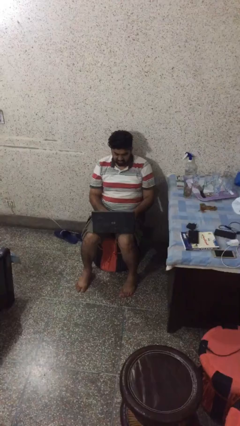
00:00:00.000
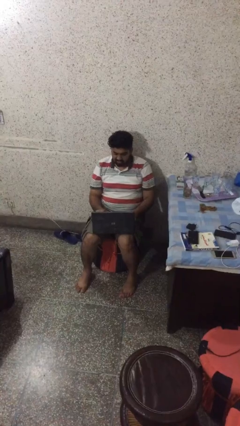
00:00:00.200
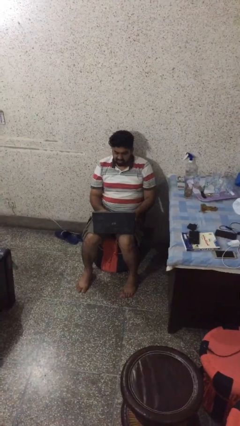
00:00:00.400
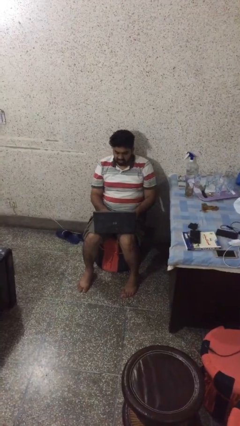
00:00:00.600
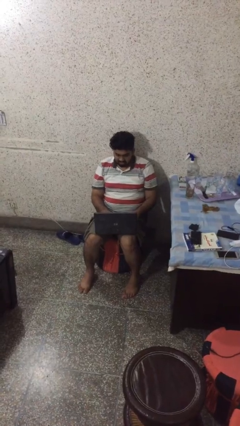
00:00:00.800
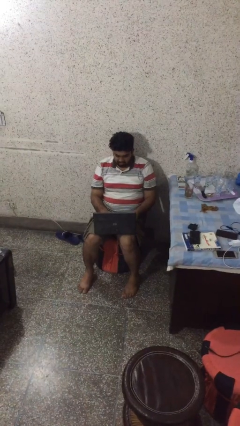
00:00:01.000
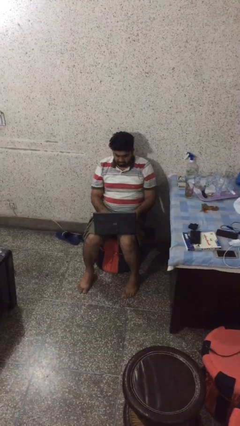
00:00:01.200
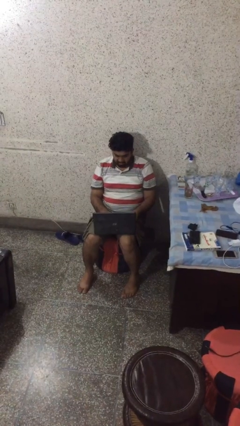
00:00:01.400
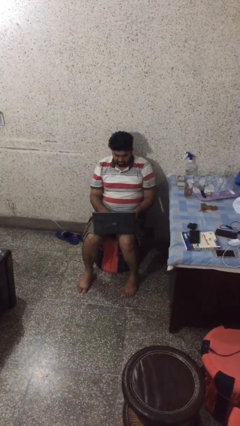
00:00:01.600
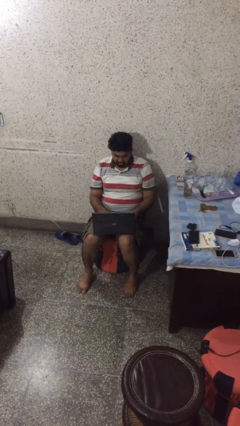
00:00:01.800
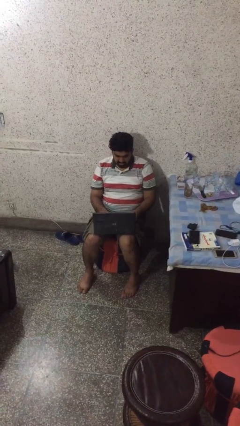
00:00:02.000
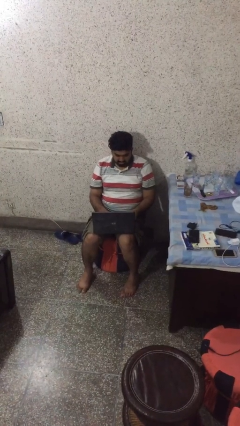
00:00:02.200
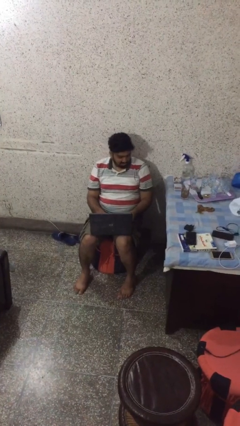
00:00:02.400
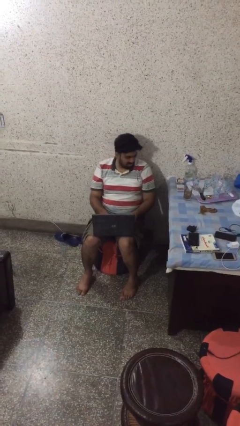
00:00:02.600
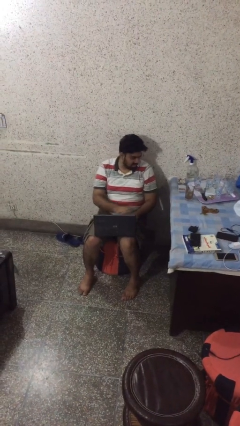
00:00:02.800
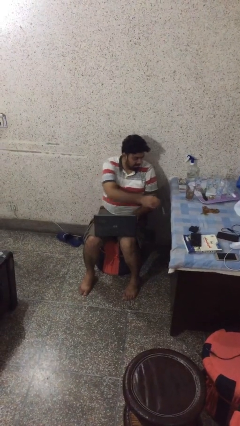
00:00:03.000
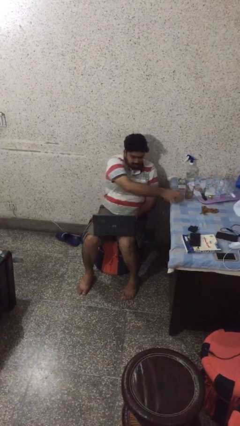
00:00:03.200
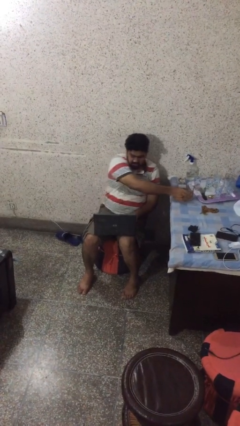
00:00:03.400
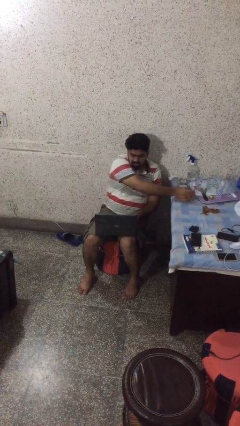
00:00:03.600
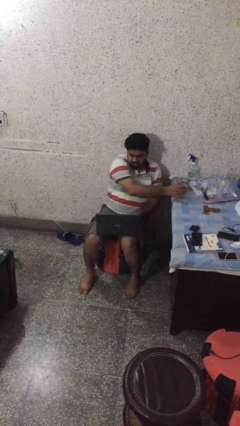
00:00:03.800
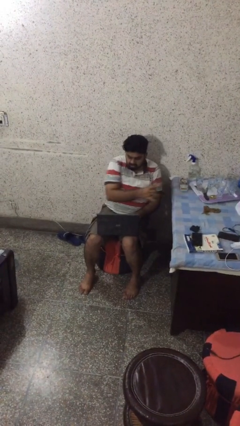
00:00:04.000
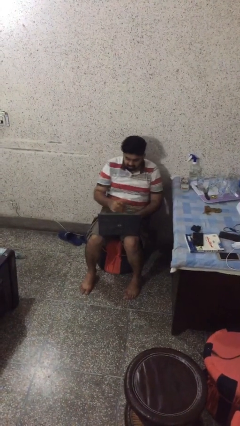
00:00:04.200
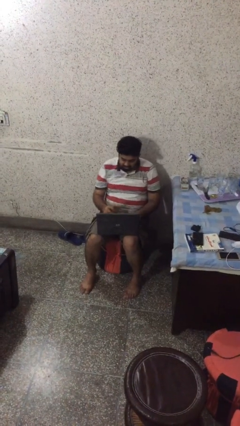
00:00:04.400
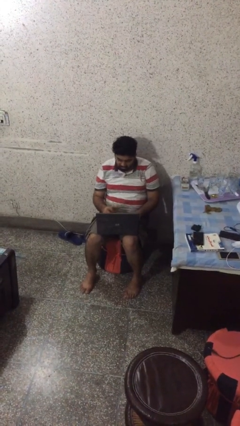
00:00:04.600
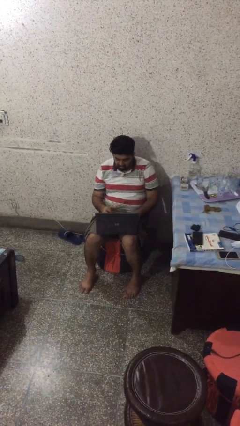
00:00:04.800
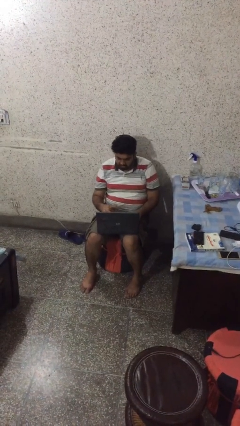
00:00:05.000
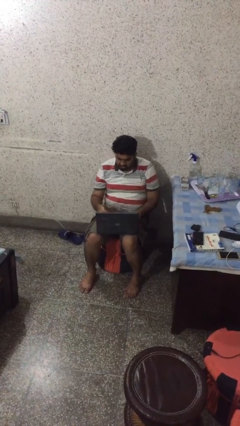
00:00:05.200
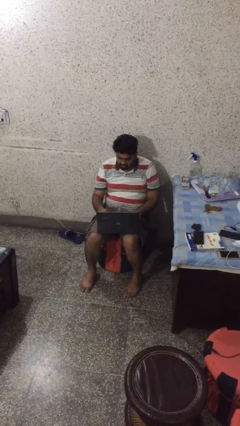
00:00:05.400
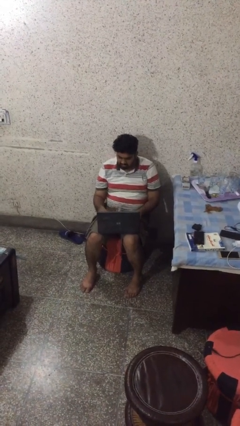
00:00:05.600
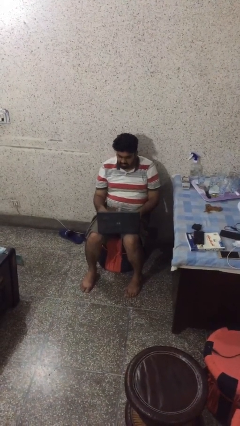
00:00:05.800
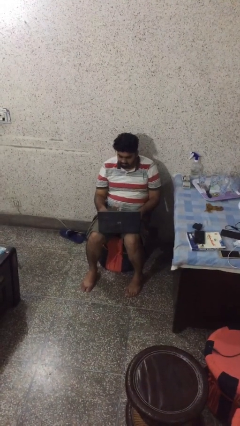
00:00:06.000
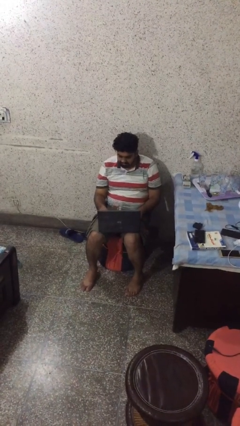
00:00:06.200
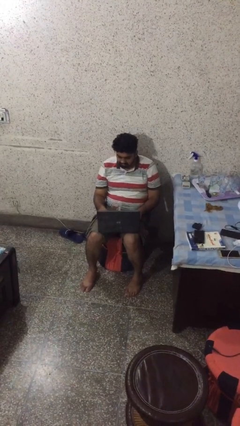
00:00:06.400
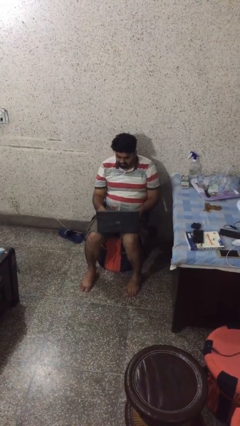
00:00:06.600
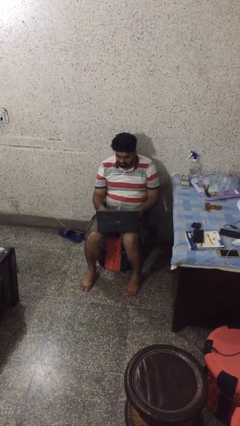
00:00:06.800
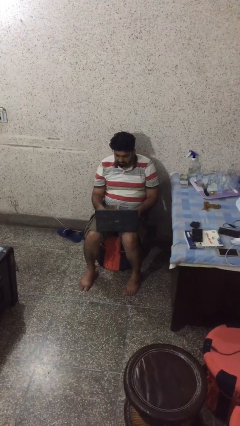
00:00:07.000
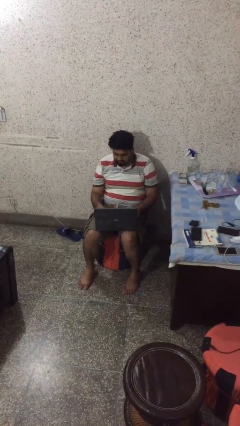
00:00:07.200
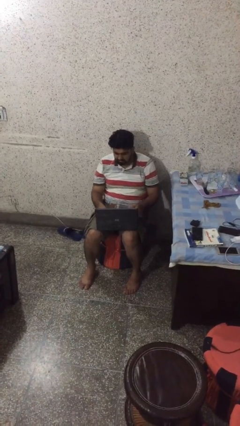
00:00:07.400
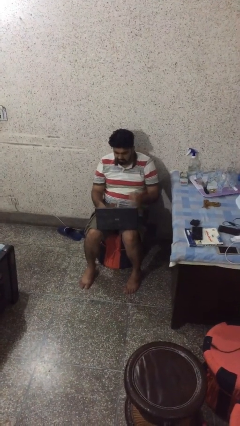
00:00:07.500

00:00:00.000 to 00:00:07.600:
person interacts with laptop

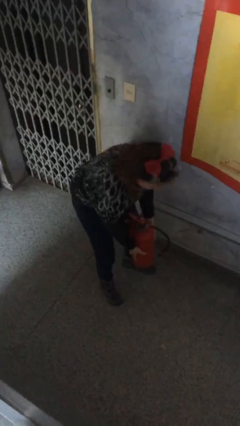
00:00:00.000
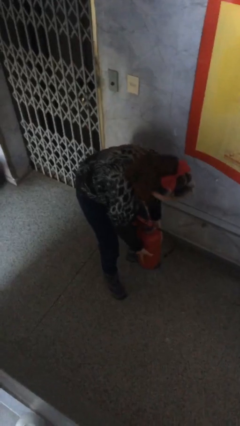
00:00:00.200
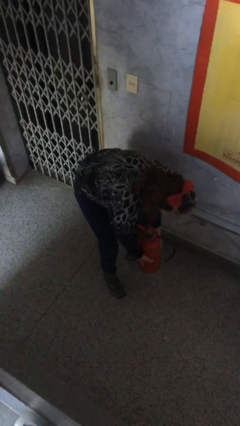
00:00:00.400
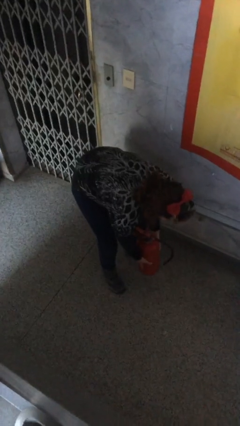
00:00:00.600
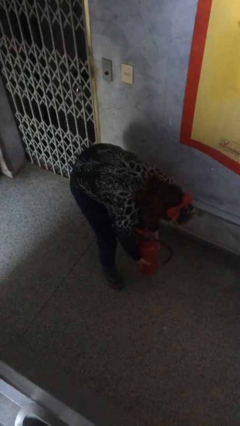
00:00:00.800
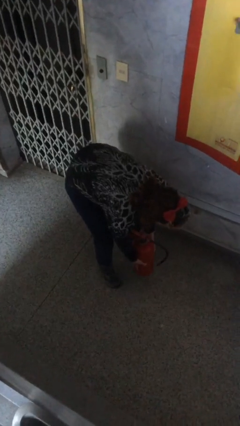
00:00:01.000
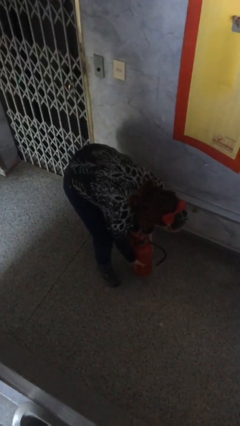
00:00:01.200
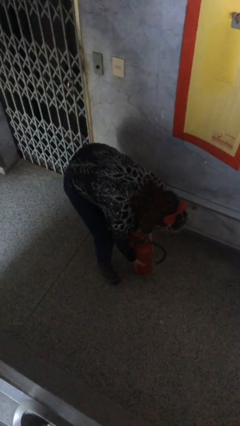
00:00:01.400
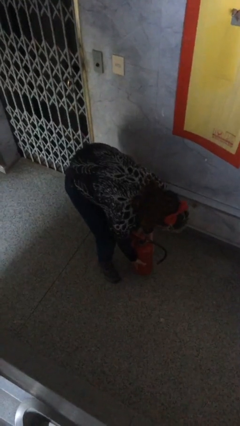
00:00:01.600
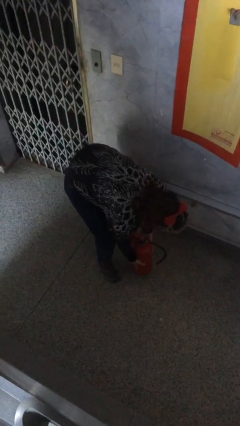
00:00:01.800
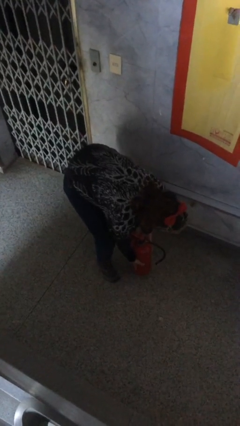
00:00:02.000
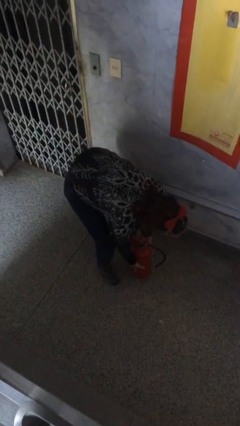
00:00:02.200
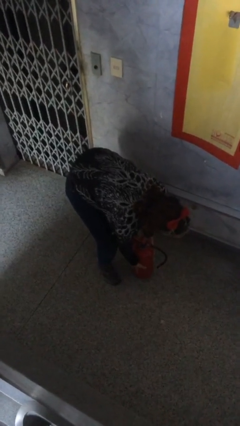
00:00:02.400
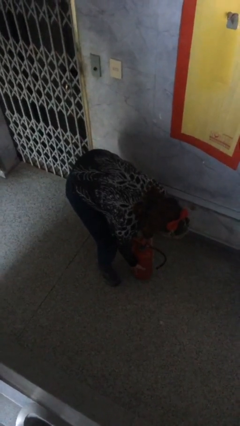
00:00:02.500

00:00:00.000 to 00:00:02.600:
person puts down object on floor

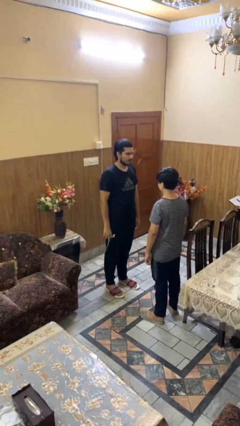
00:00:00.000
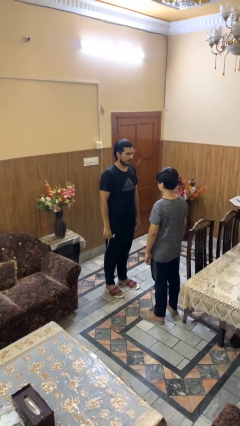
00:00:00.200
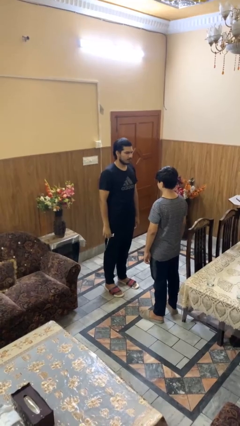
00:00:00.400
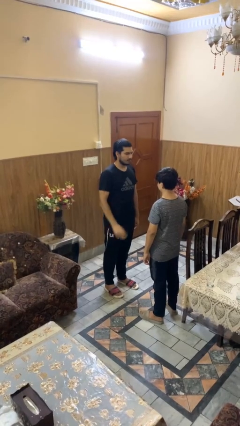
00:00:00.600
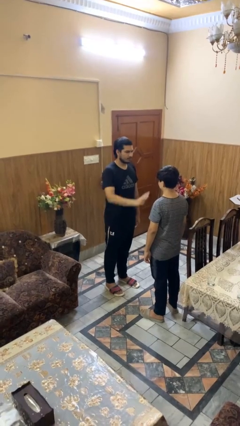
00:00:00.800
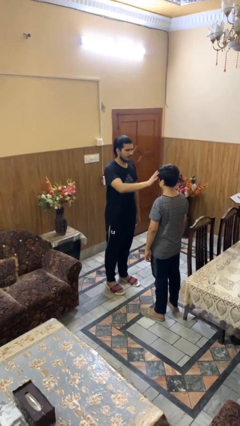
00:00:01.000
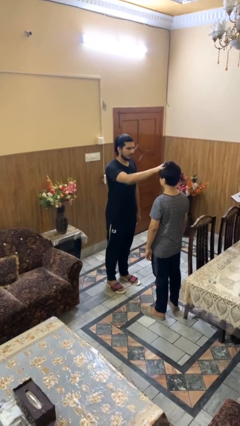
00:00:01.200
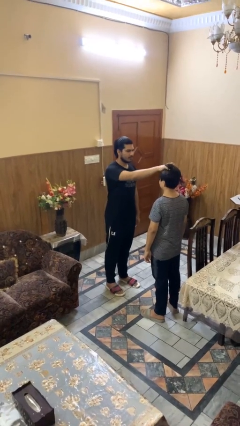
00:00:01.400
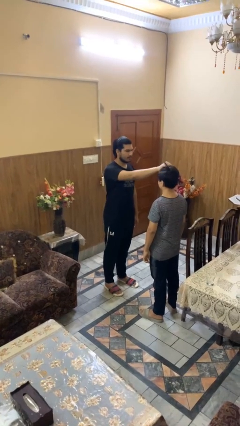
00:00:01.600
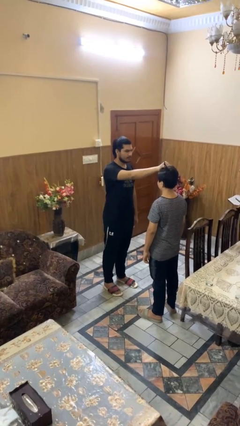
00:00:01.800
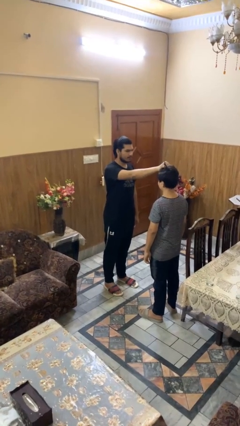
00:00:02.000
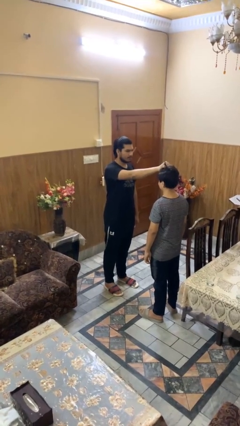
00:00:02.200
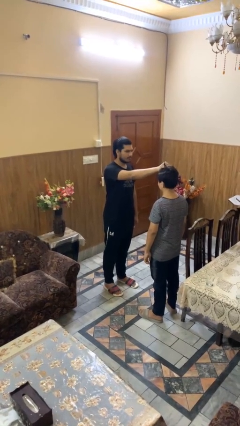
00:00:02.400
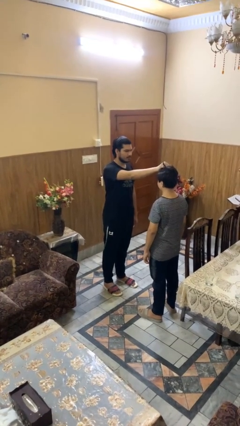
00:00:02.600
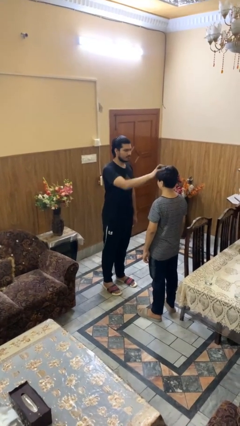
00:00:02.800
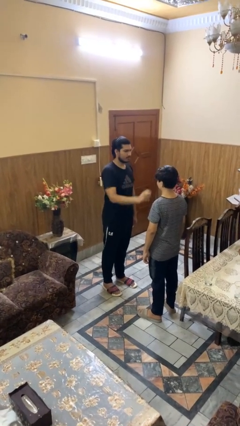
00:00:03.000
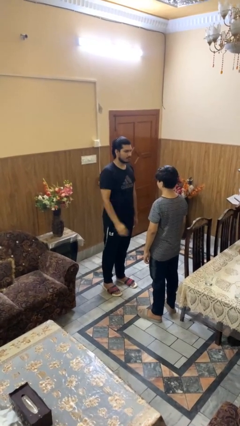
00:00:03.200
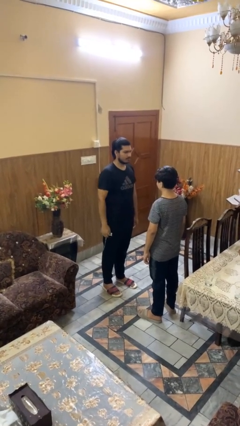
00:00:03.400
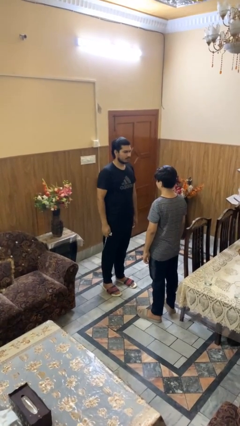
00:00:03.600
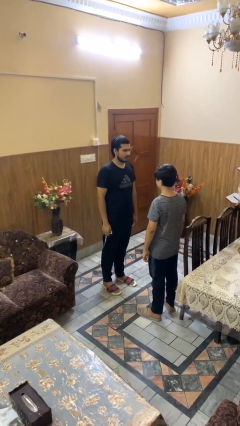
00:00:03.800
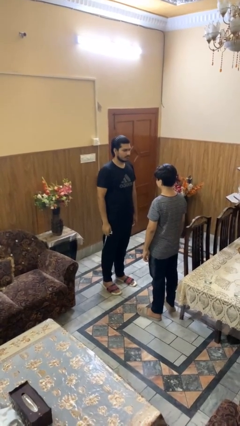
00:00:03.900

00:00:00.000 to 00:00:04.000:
person grabs person by hair

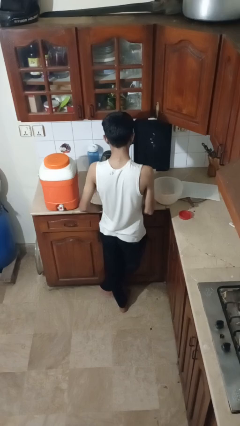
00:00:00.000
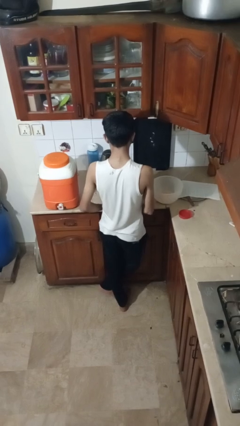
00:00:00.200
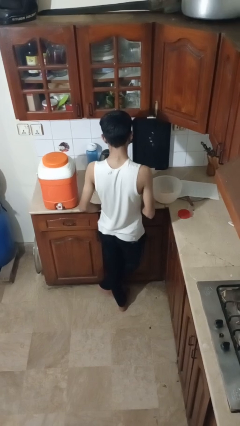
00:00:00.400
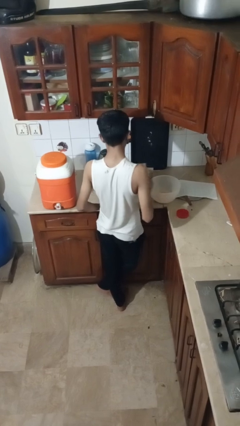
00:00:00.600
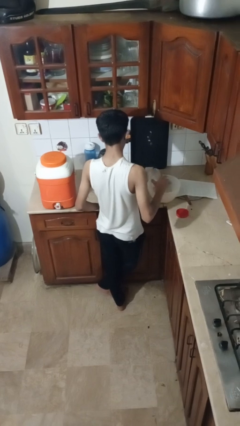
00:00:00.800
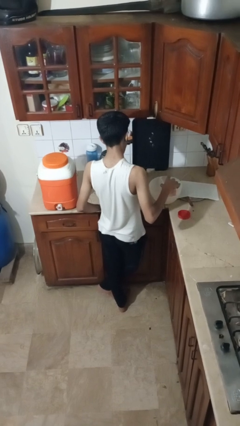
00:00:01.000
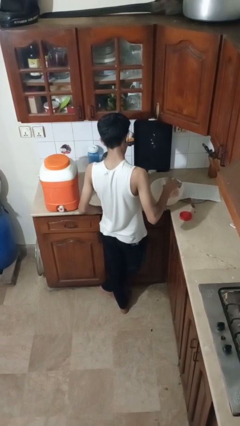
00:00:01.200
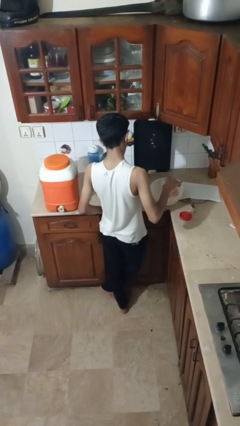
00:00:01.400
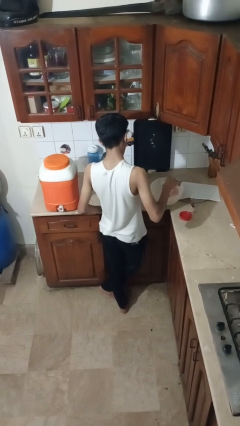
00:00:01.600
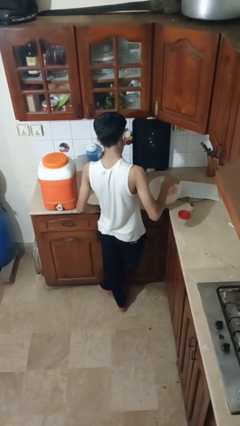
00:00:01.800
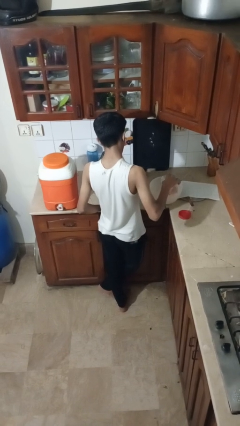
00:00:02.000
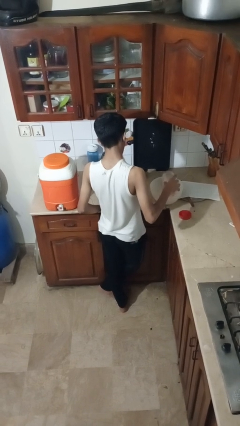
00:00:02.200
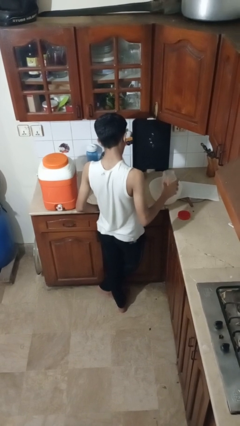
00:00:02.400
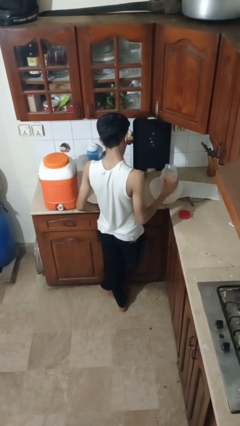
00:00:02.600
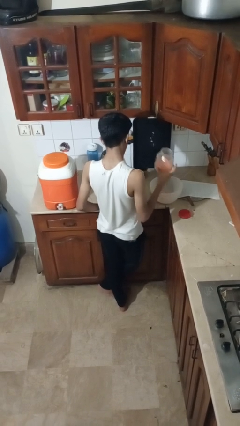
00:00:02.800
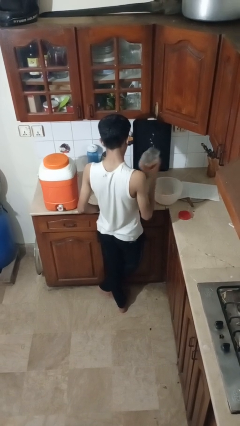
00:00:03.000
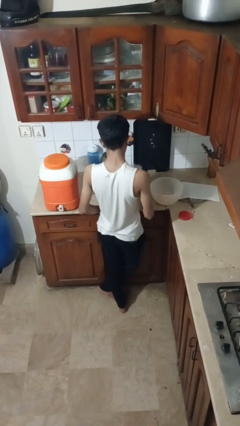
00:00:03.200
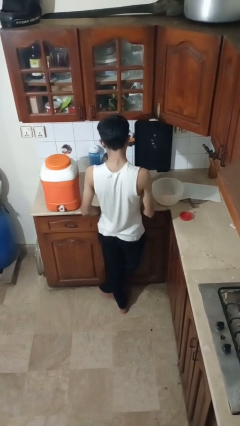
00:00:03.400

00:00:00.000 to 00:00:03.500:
person pours into bowl

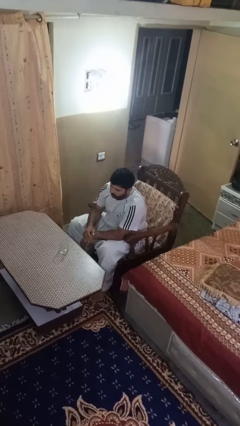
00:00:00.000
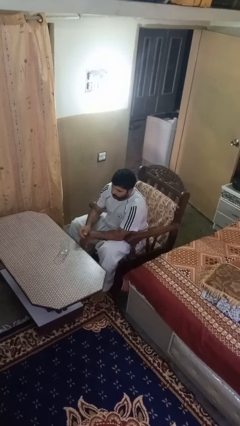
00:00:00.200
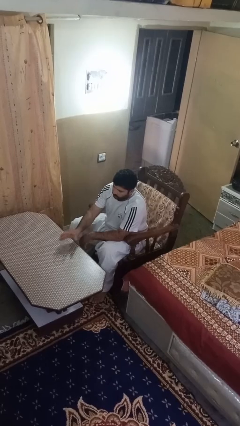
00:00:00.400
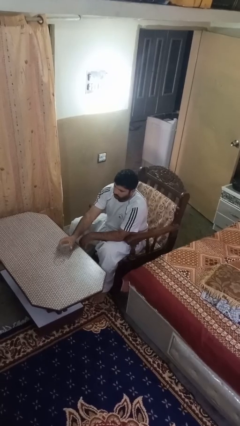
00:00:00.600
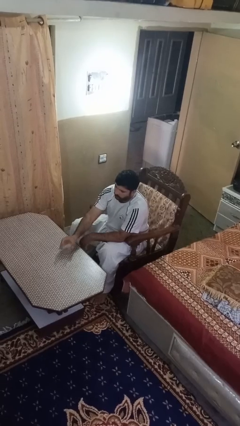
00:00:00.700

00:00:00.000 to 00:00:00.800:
person picks up object from table
